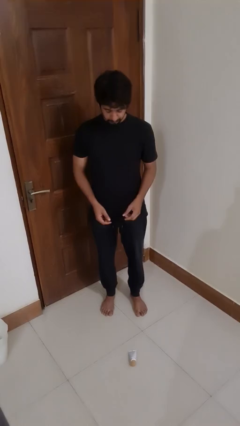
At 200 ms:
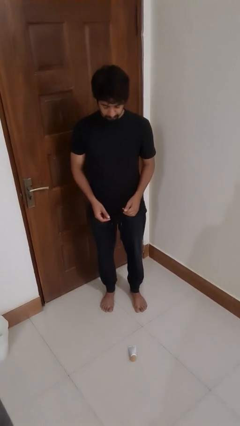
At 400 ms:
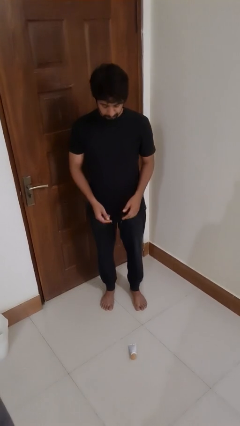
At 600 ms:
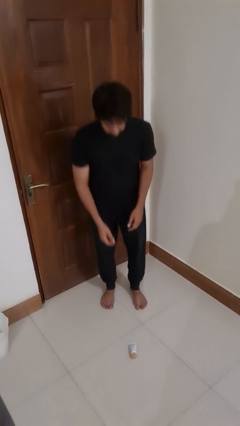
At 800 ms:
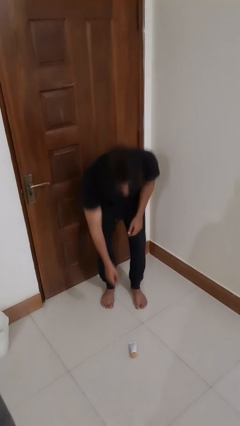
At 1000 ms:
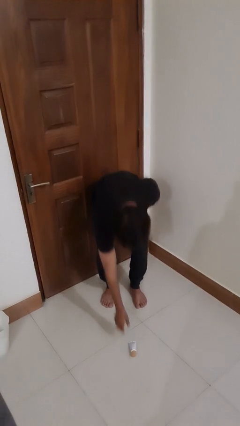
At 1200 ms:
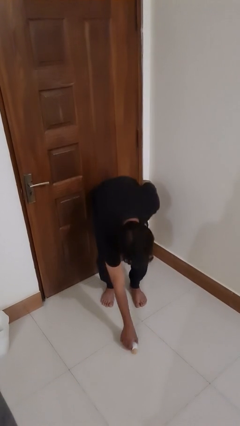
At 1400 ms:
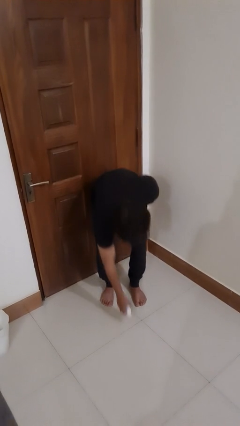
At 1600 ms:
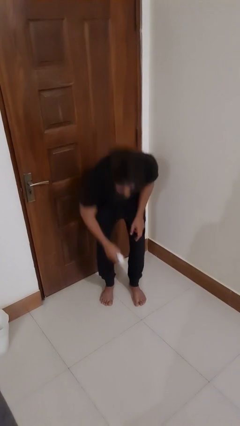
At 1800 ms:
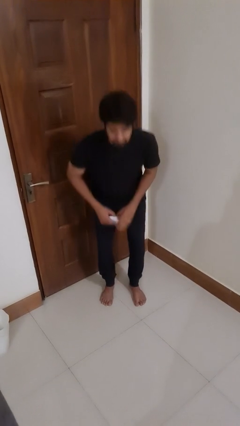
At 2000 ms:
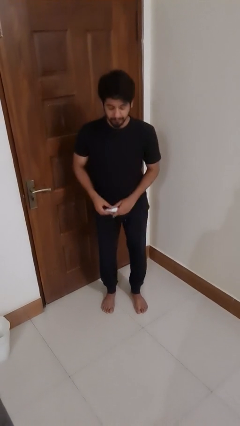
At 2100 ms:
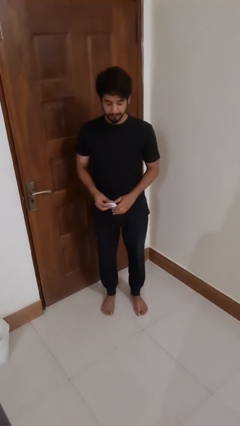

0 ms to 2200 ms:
person picks up object from floor

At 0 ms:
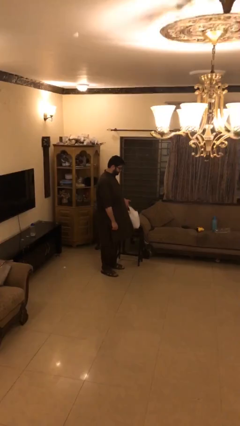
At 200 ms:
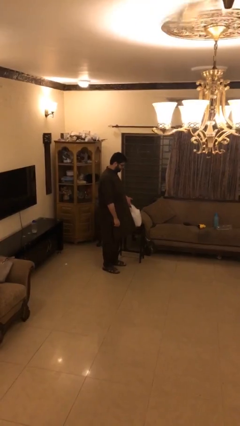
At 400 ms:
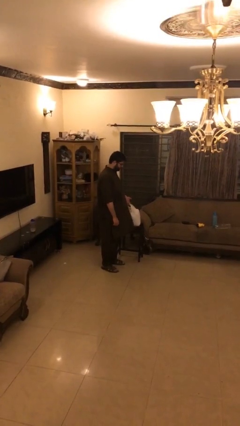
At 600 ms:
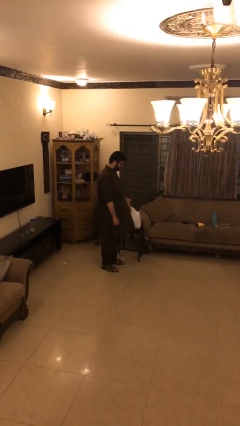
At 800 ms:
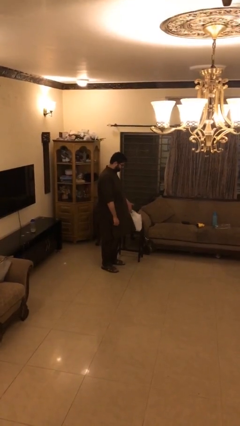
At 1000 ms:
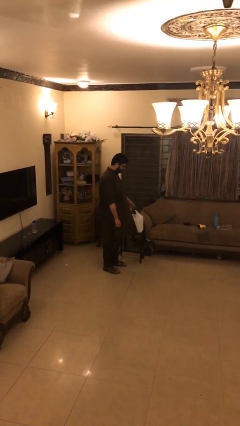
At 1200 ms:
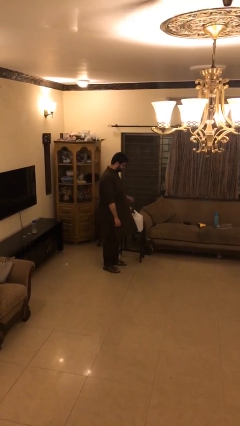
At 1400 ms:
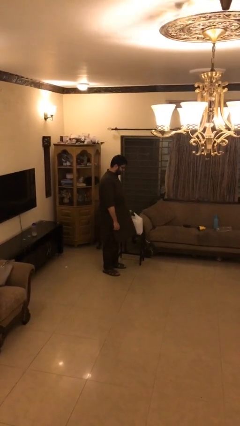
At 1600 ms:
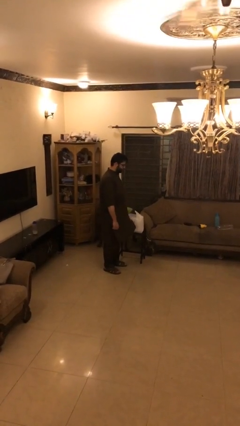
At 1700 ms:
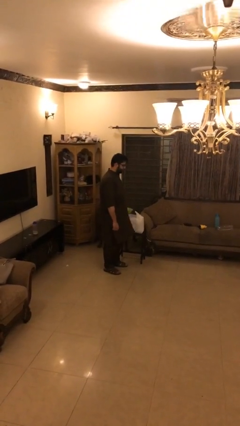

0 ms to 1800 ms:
person puts down object on table

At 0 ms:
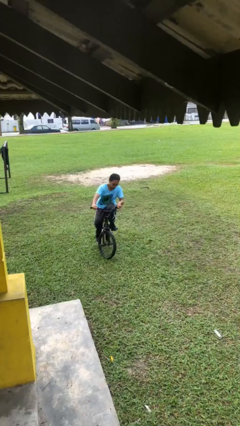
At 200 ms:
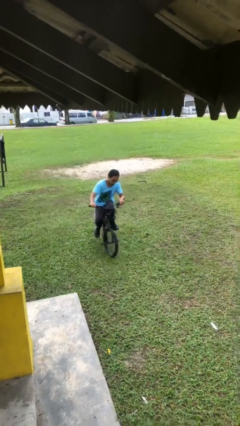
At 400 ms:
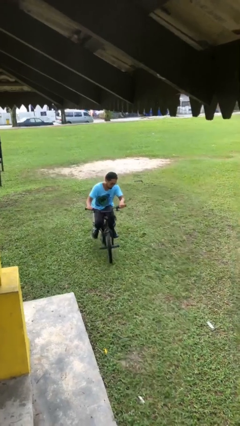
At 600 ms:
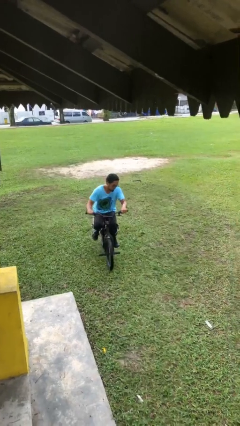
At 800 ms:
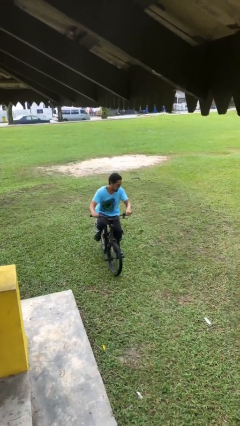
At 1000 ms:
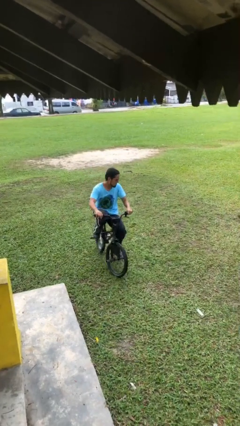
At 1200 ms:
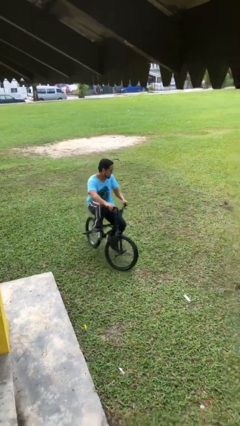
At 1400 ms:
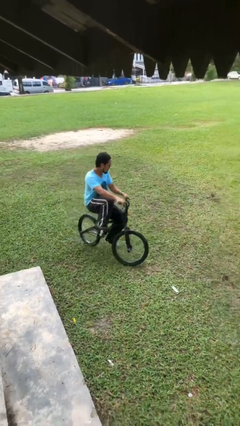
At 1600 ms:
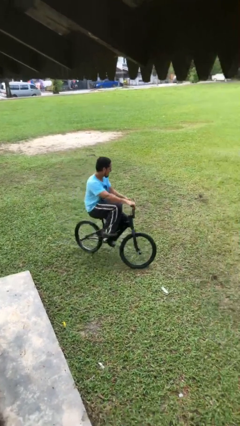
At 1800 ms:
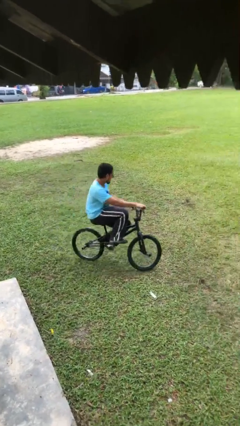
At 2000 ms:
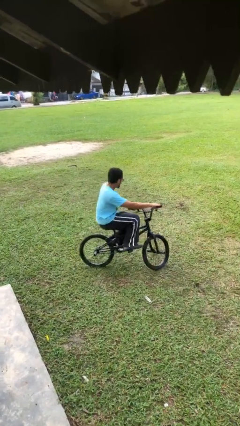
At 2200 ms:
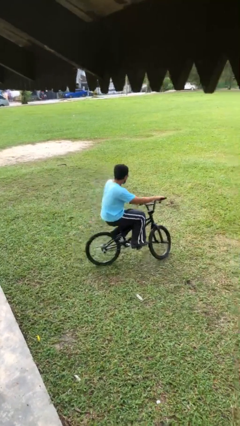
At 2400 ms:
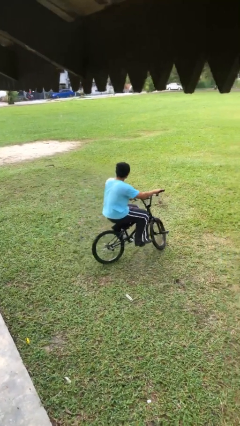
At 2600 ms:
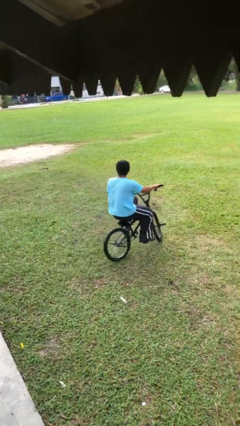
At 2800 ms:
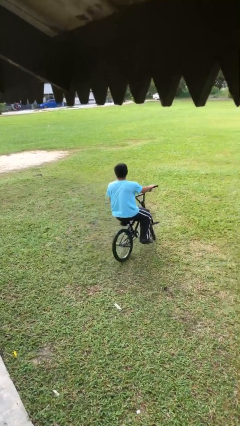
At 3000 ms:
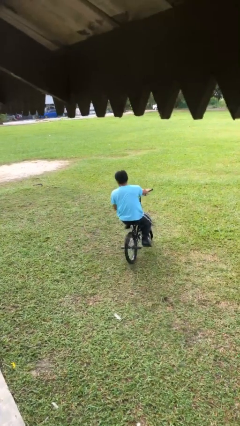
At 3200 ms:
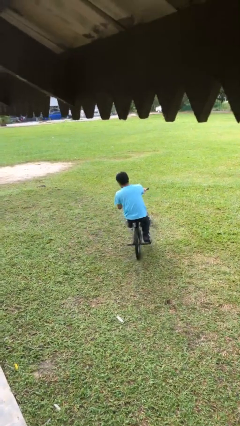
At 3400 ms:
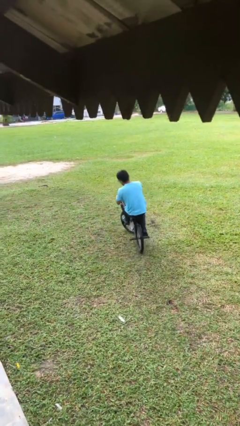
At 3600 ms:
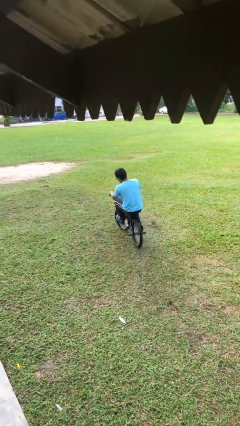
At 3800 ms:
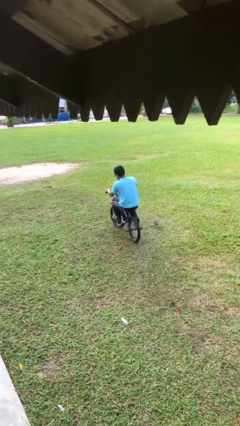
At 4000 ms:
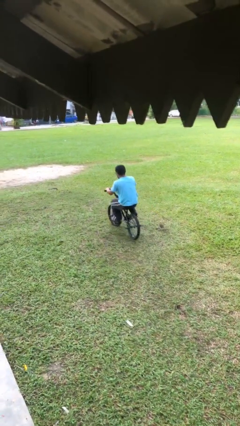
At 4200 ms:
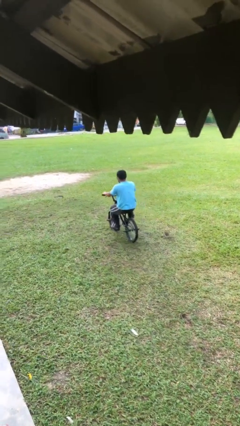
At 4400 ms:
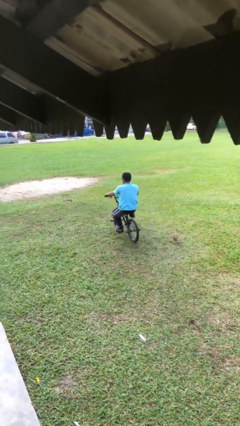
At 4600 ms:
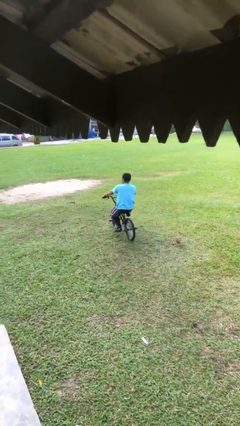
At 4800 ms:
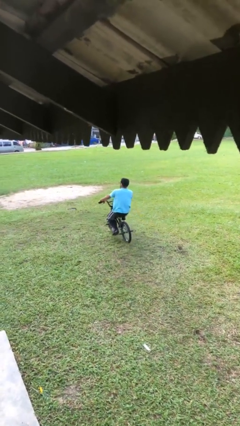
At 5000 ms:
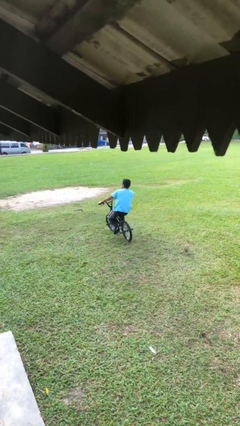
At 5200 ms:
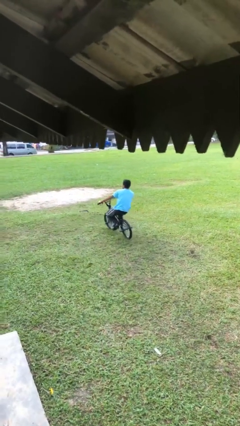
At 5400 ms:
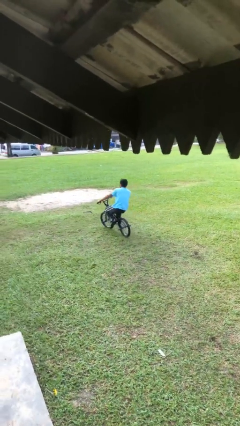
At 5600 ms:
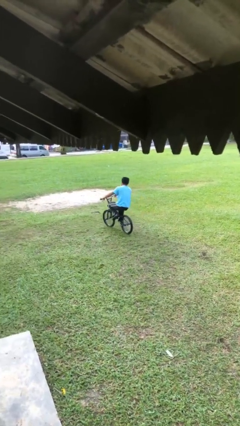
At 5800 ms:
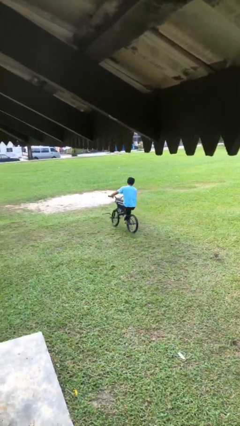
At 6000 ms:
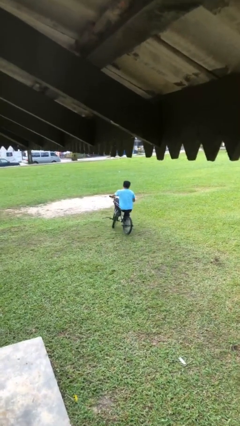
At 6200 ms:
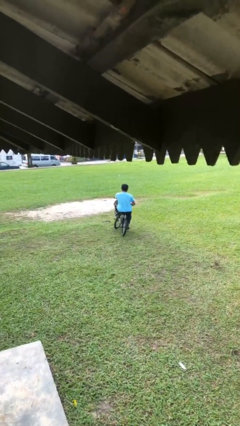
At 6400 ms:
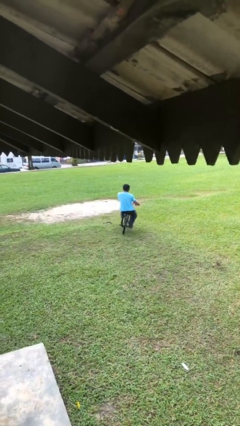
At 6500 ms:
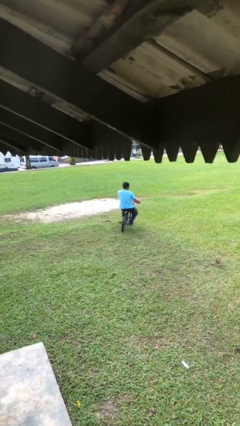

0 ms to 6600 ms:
person rides bicycle

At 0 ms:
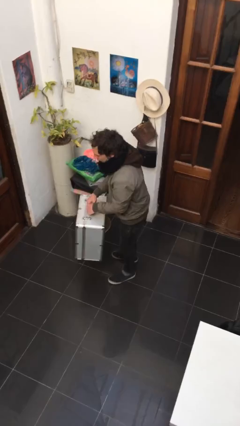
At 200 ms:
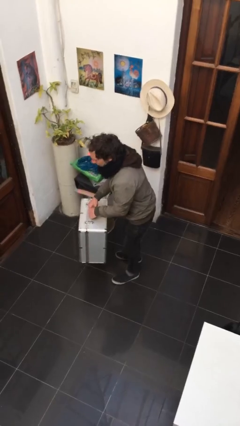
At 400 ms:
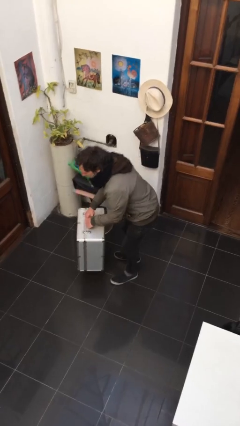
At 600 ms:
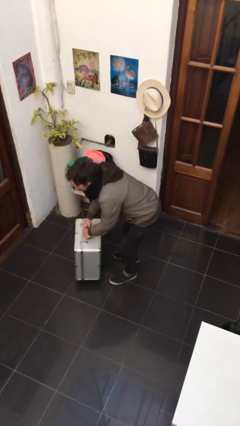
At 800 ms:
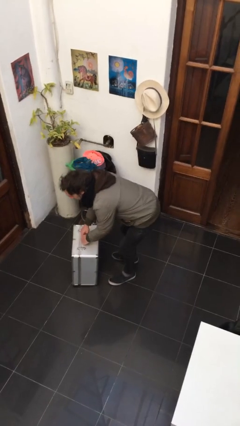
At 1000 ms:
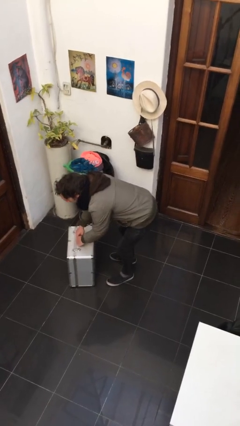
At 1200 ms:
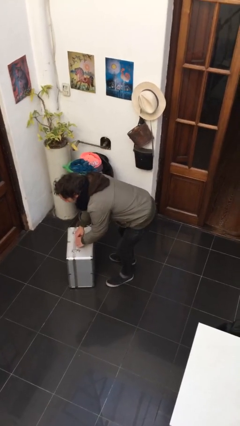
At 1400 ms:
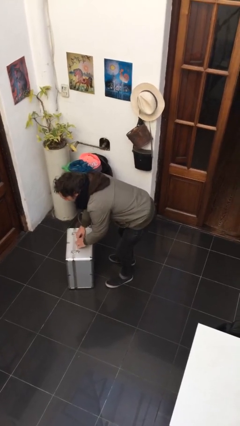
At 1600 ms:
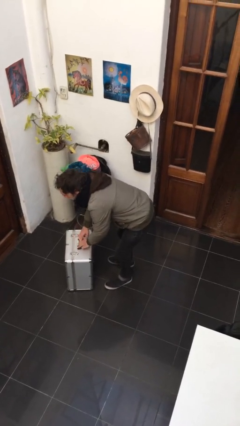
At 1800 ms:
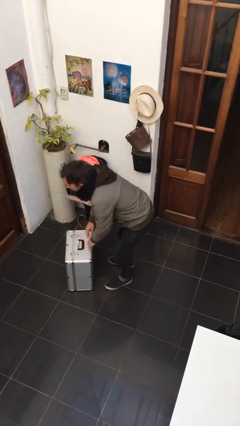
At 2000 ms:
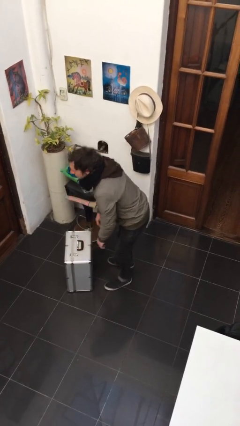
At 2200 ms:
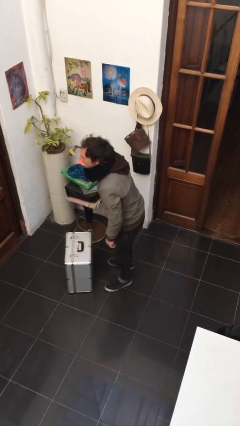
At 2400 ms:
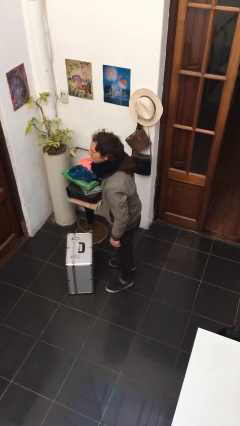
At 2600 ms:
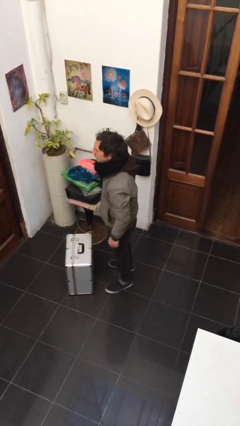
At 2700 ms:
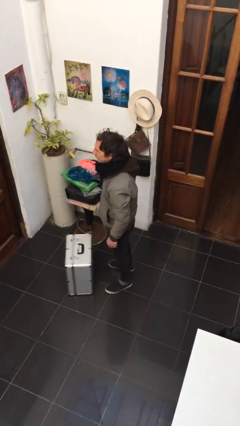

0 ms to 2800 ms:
person puts down object on floor

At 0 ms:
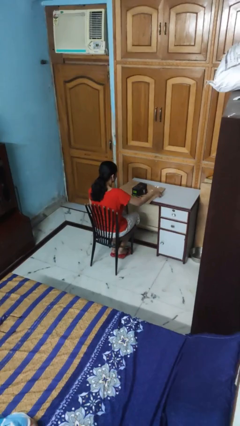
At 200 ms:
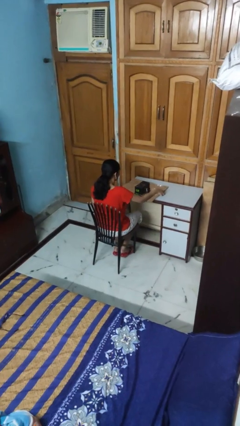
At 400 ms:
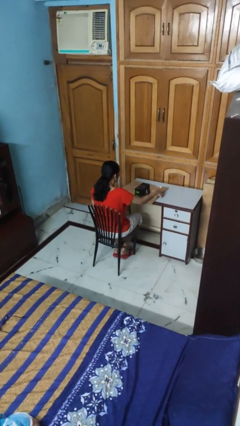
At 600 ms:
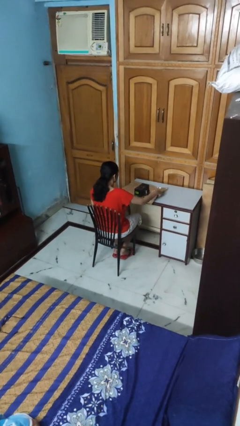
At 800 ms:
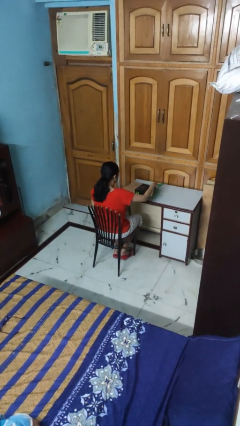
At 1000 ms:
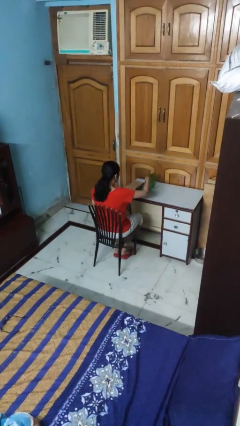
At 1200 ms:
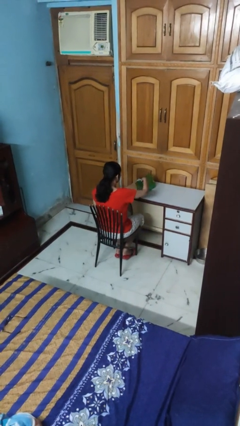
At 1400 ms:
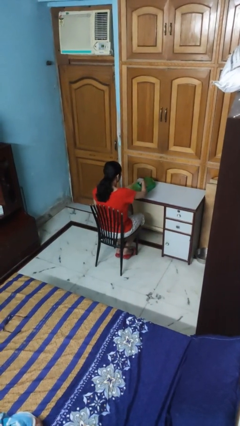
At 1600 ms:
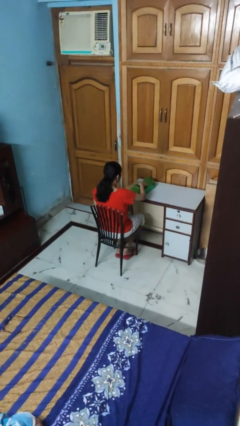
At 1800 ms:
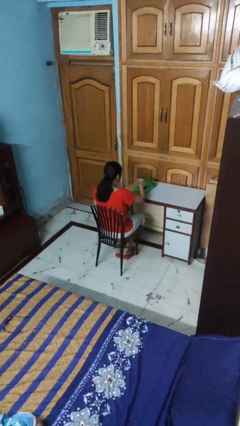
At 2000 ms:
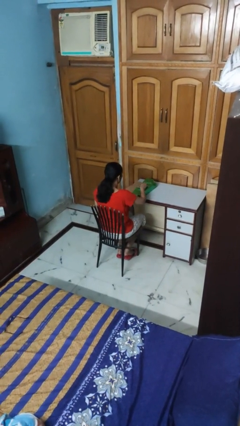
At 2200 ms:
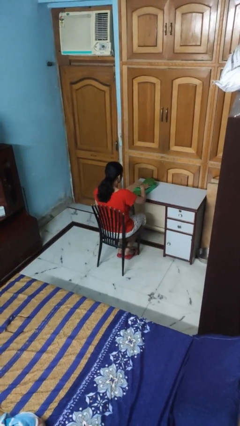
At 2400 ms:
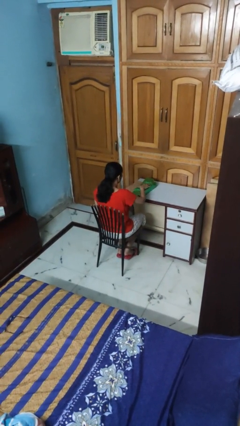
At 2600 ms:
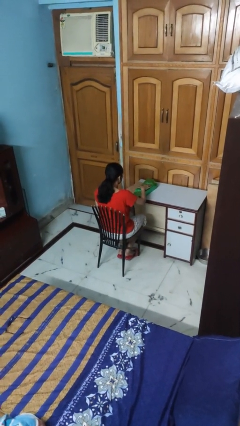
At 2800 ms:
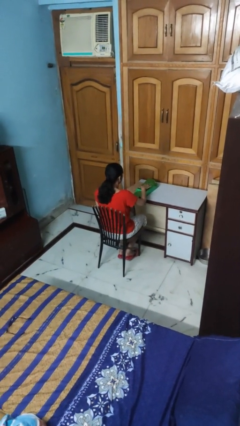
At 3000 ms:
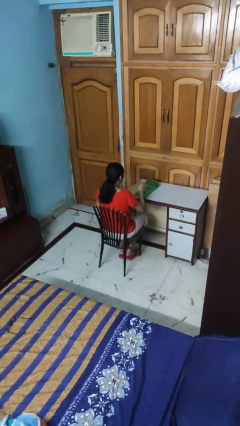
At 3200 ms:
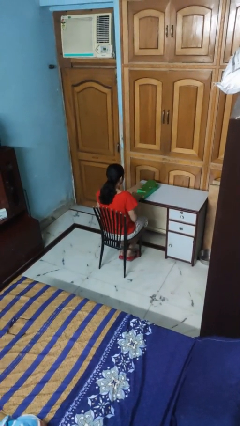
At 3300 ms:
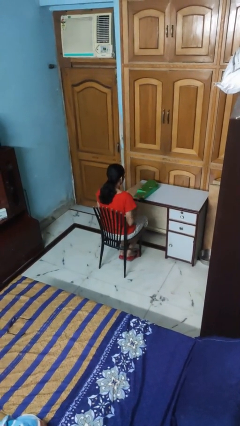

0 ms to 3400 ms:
person wraps box

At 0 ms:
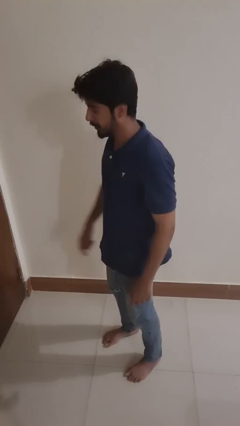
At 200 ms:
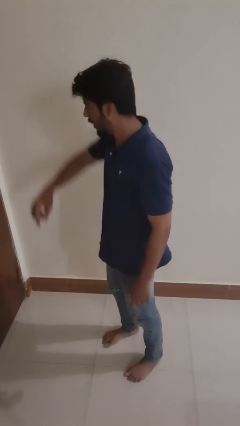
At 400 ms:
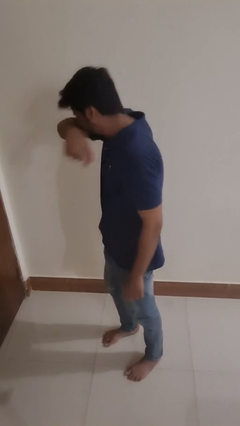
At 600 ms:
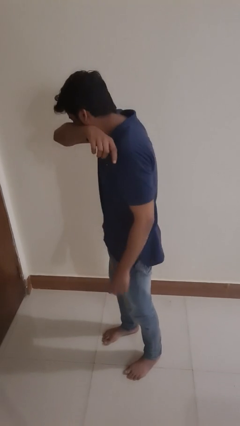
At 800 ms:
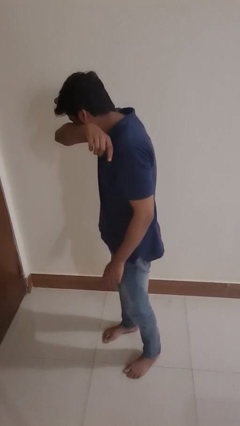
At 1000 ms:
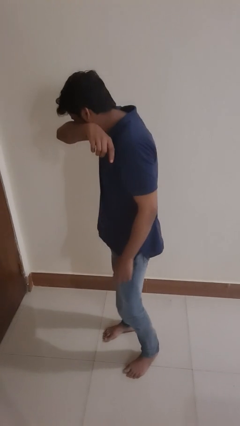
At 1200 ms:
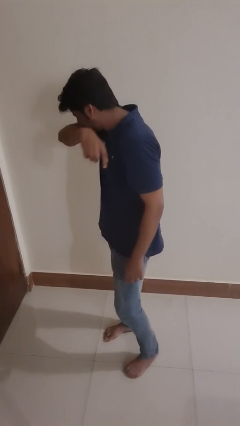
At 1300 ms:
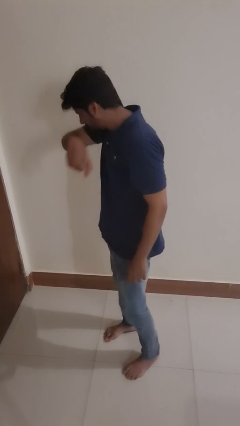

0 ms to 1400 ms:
person sneezes into arm
